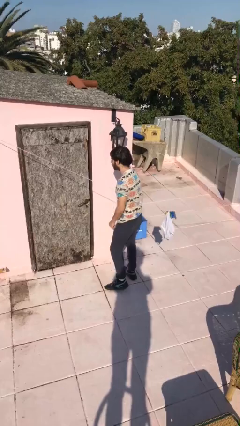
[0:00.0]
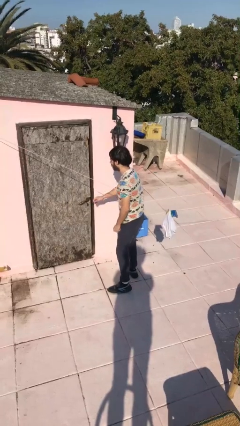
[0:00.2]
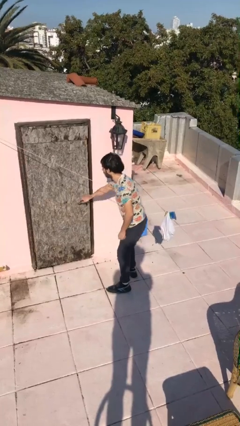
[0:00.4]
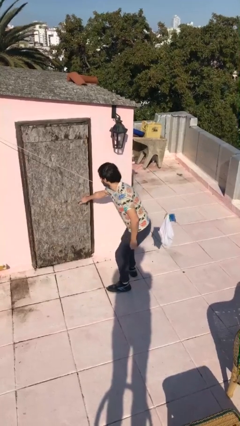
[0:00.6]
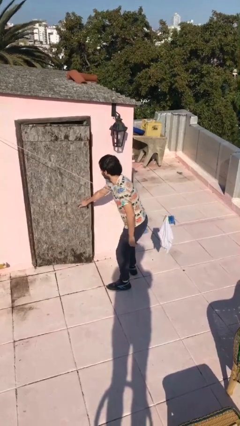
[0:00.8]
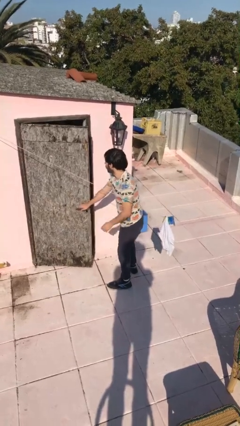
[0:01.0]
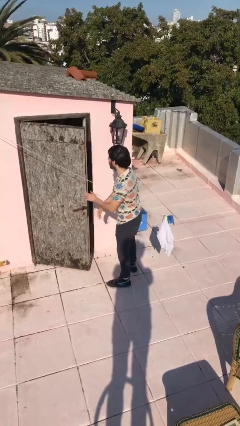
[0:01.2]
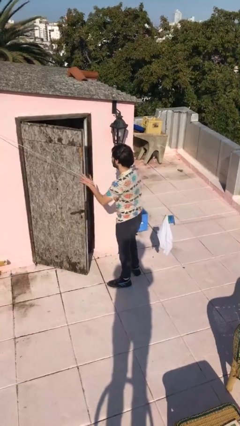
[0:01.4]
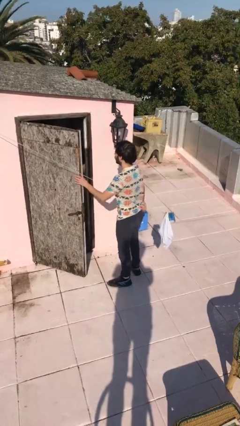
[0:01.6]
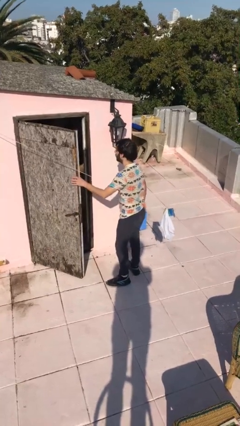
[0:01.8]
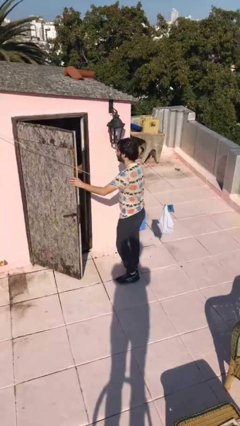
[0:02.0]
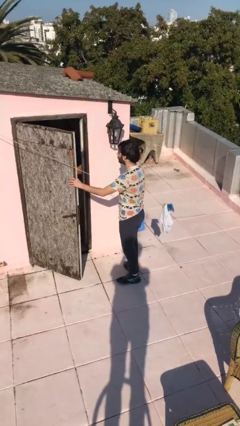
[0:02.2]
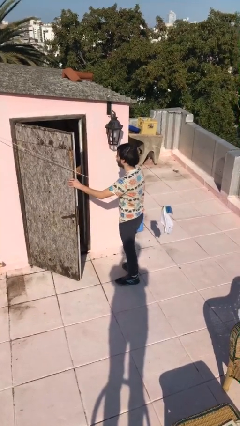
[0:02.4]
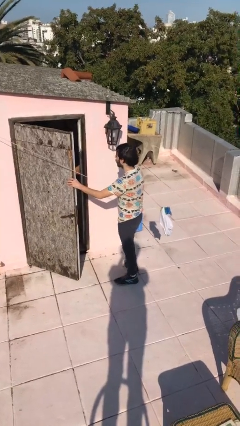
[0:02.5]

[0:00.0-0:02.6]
person opens facility door

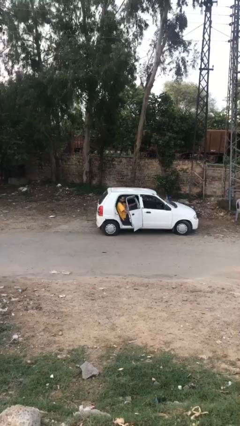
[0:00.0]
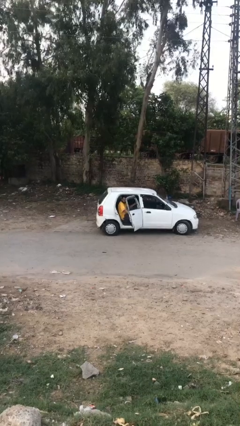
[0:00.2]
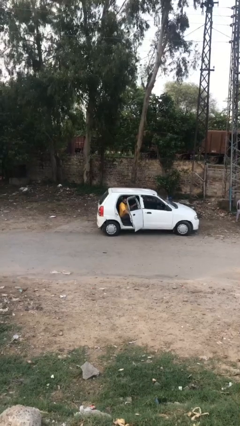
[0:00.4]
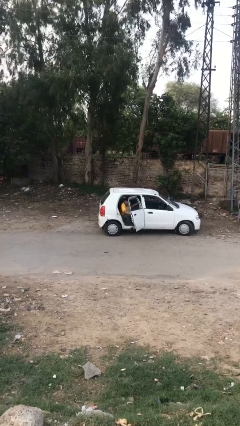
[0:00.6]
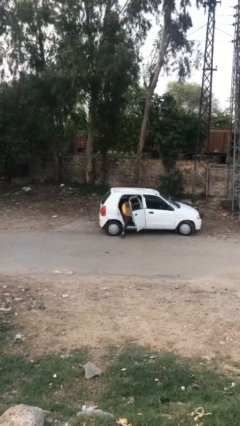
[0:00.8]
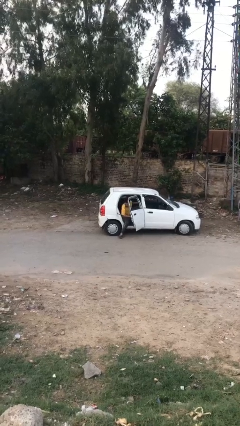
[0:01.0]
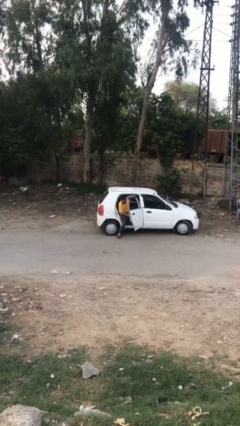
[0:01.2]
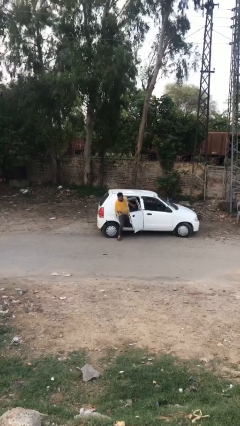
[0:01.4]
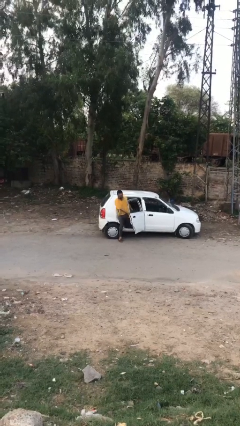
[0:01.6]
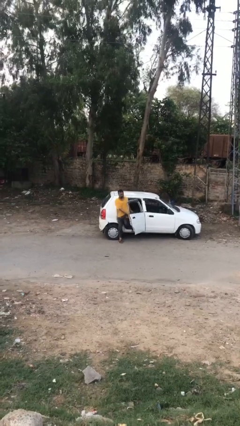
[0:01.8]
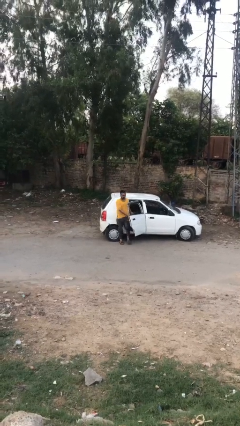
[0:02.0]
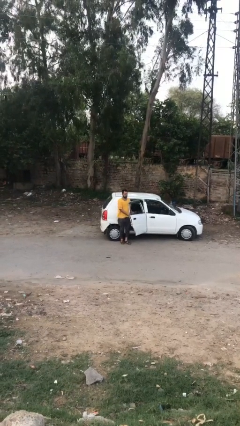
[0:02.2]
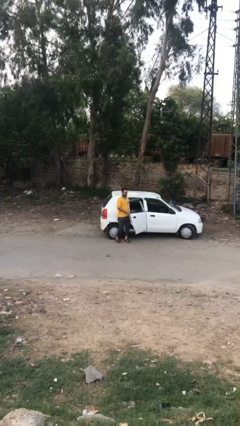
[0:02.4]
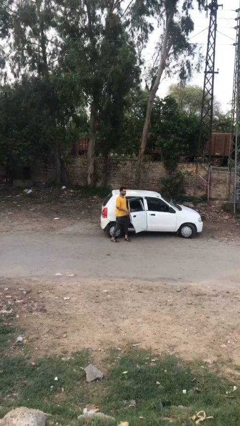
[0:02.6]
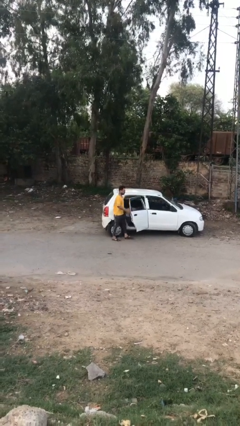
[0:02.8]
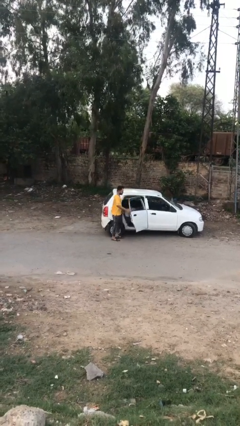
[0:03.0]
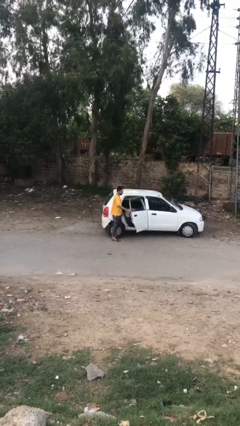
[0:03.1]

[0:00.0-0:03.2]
person exits car

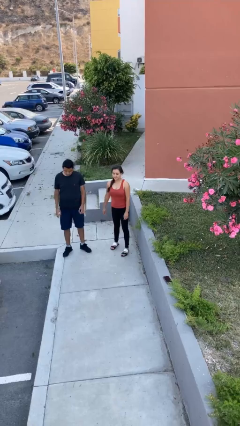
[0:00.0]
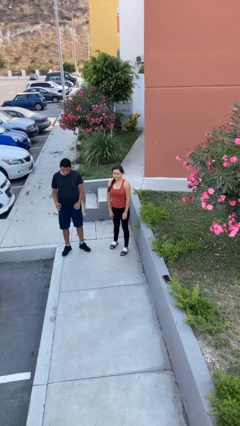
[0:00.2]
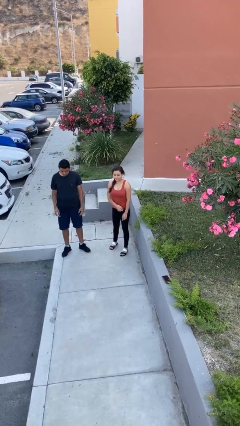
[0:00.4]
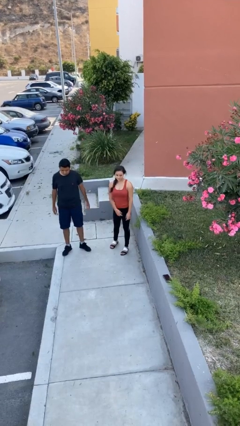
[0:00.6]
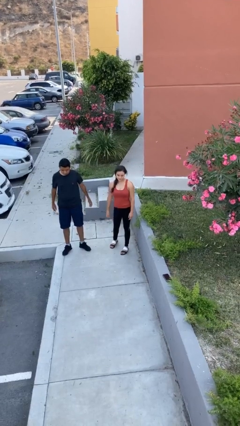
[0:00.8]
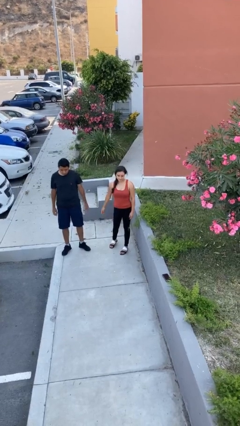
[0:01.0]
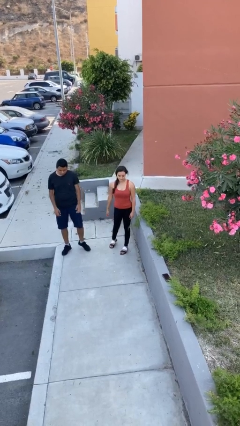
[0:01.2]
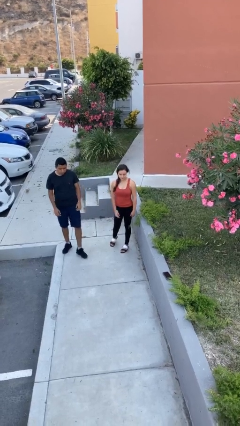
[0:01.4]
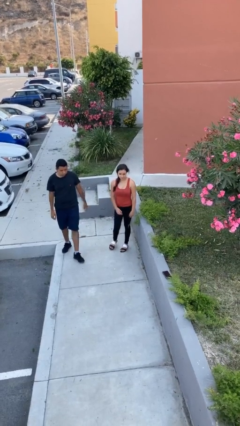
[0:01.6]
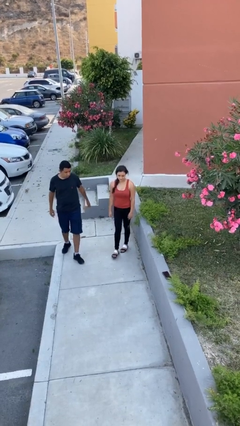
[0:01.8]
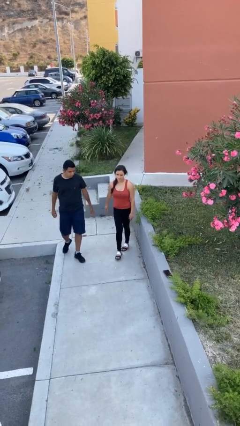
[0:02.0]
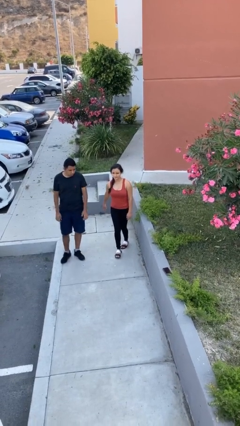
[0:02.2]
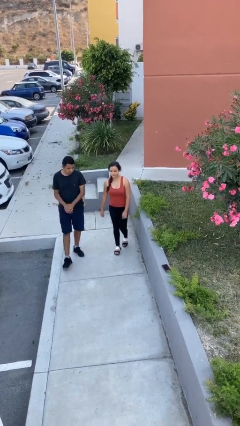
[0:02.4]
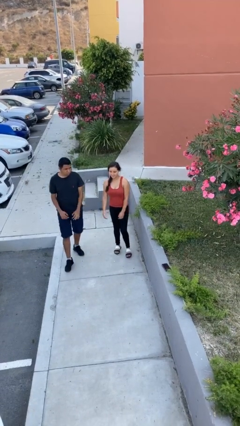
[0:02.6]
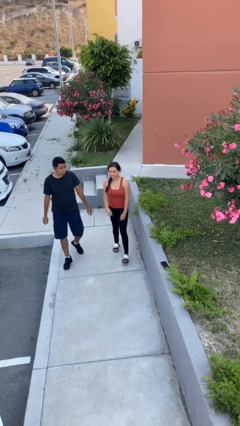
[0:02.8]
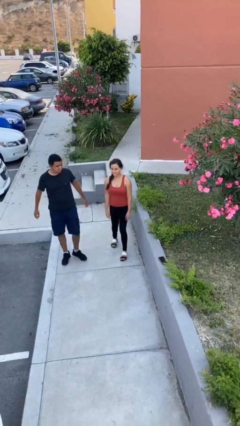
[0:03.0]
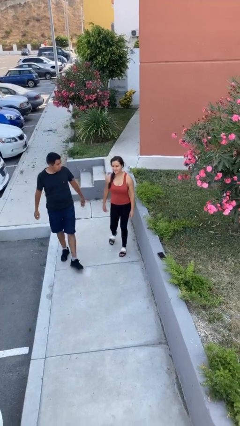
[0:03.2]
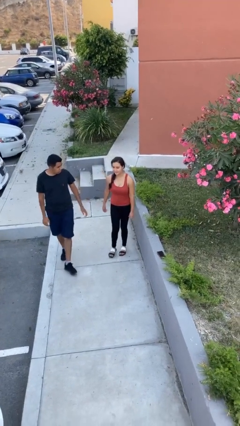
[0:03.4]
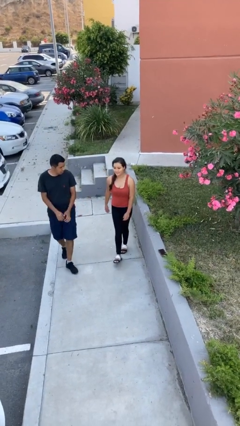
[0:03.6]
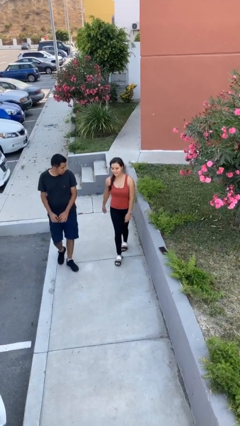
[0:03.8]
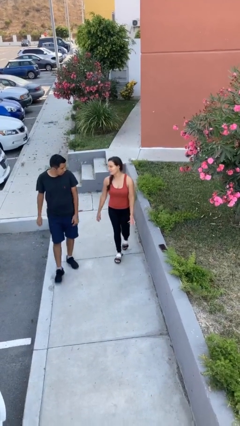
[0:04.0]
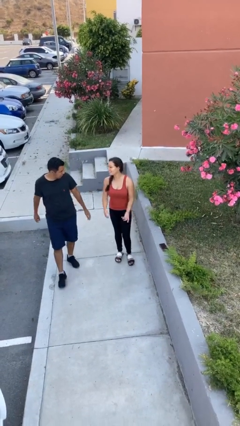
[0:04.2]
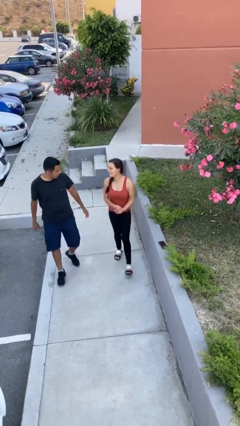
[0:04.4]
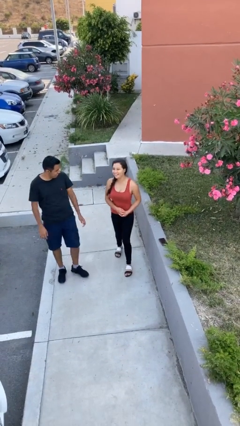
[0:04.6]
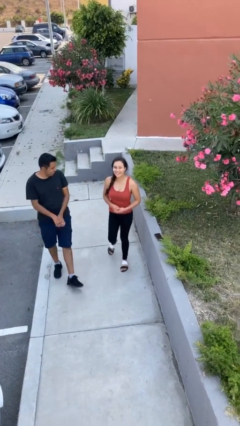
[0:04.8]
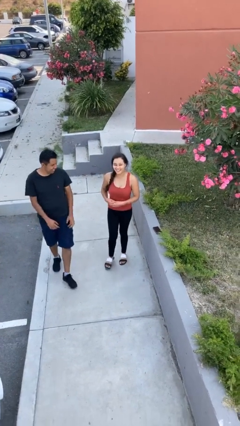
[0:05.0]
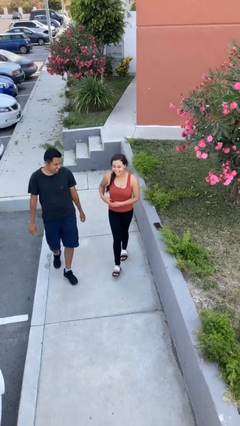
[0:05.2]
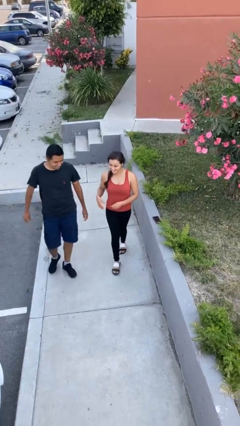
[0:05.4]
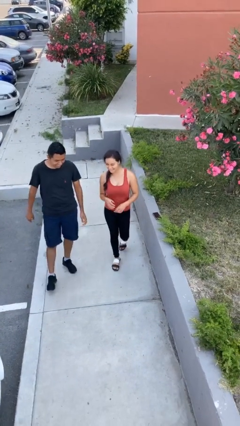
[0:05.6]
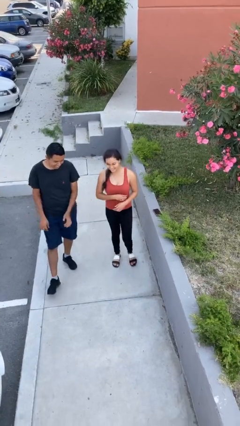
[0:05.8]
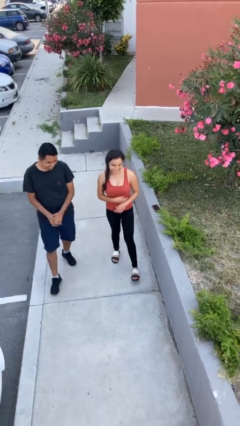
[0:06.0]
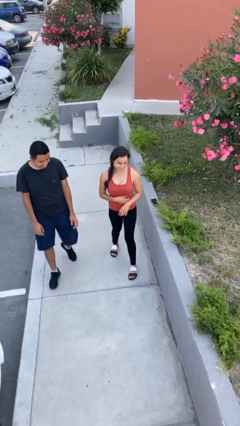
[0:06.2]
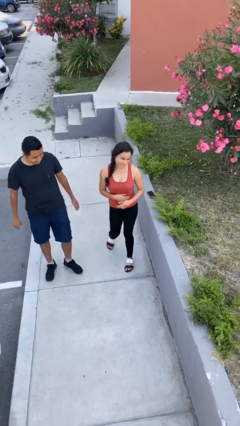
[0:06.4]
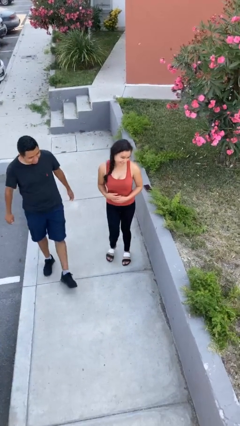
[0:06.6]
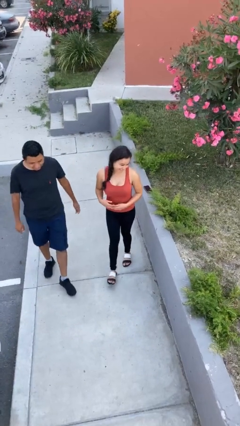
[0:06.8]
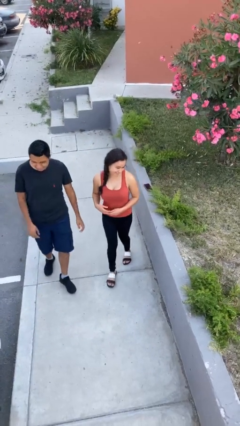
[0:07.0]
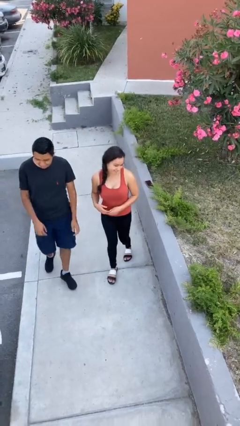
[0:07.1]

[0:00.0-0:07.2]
person talks to person

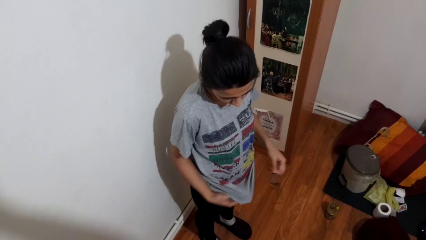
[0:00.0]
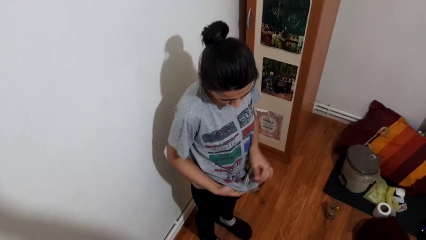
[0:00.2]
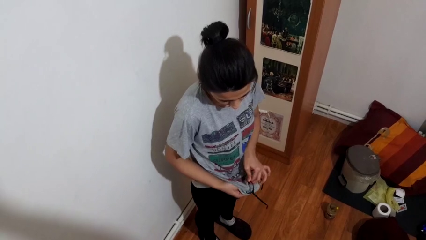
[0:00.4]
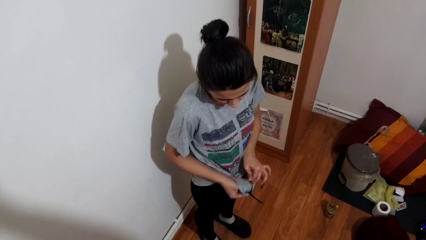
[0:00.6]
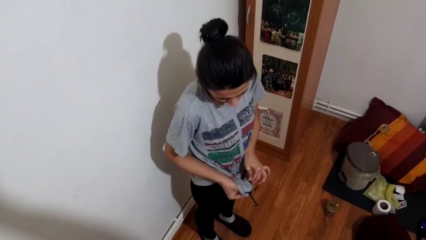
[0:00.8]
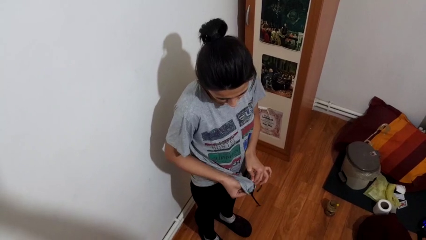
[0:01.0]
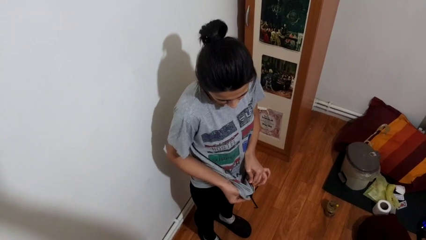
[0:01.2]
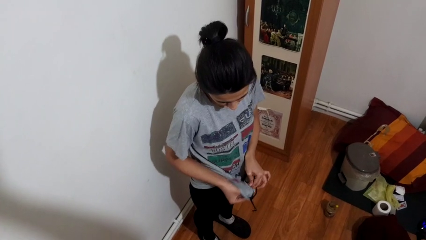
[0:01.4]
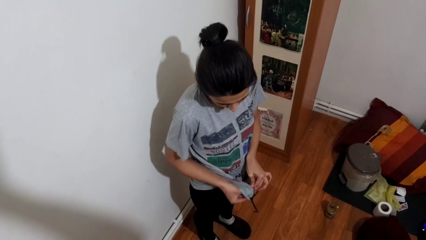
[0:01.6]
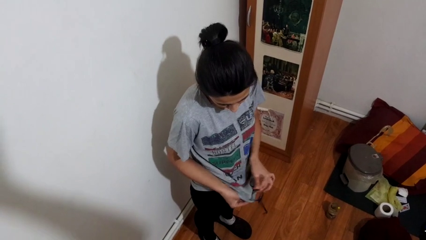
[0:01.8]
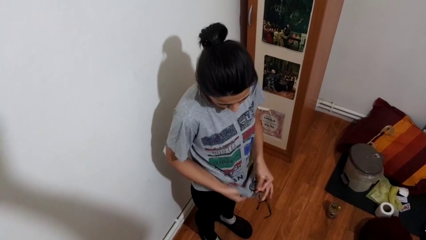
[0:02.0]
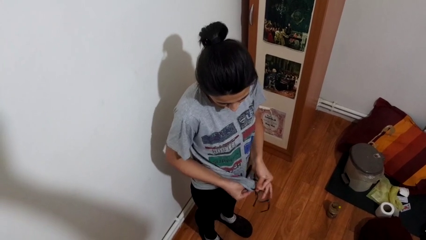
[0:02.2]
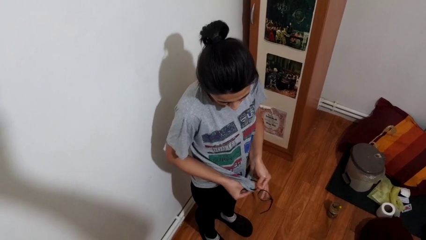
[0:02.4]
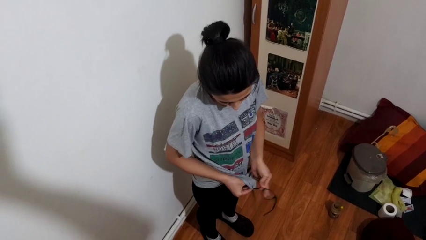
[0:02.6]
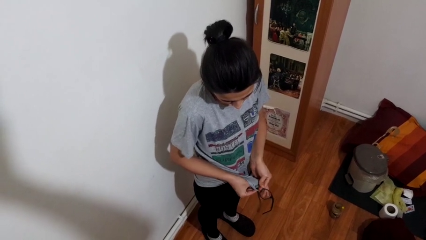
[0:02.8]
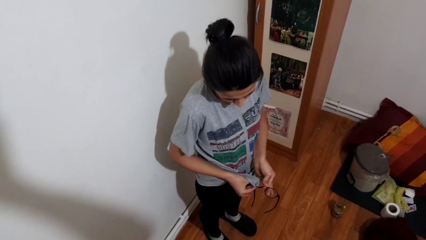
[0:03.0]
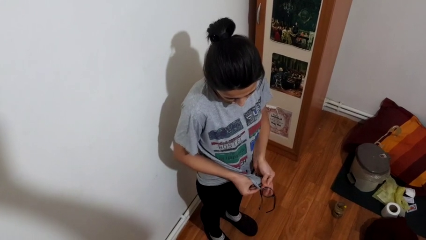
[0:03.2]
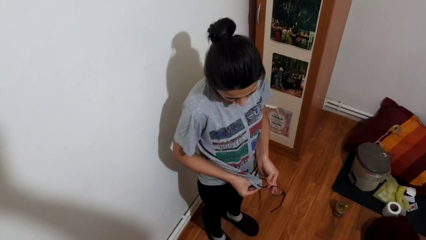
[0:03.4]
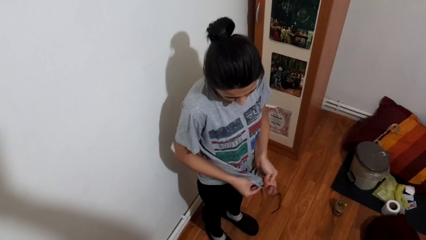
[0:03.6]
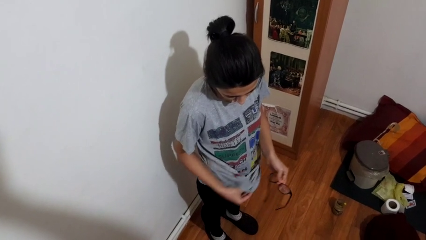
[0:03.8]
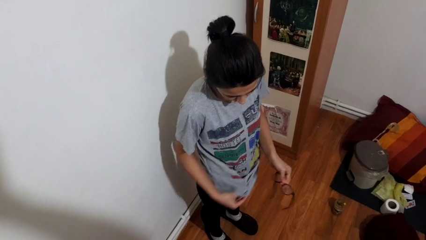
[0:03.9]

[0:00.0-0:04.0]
person cleans eyeglasses

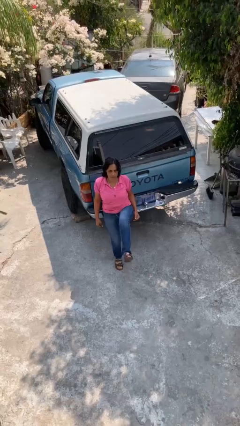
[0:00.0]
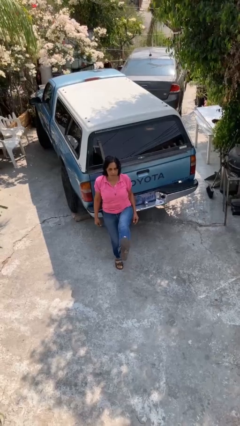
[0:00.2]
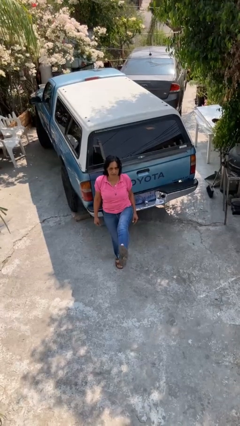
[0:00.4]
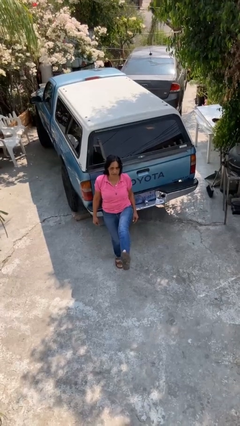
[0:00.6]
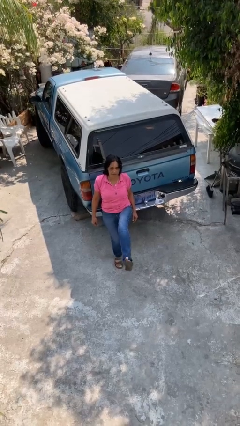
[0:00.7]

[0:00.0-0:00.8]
person karate kicks
